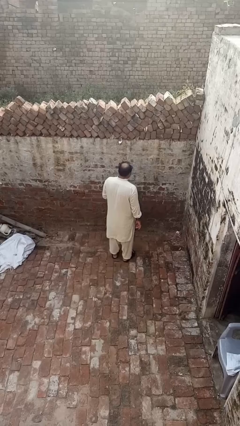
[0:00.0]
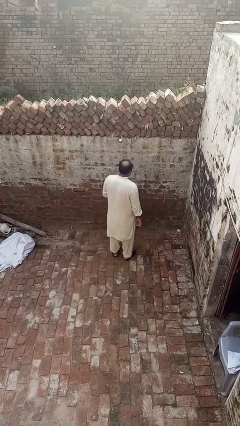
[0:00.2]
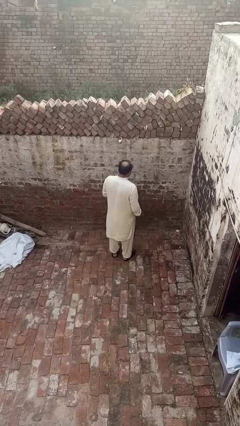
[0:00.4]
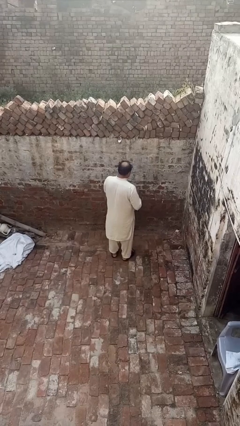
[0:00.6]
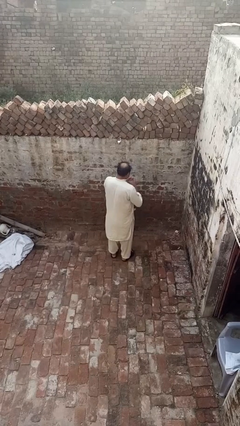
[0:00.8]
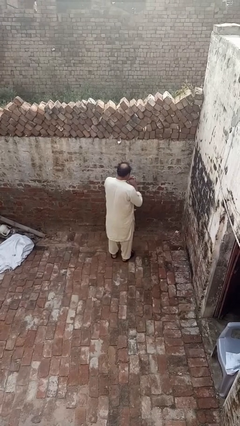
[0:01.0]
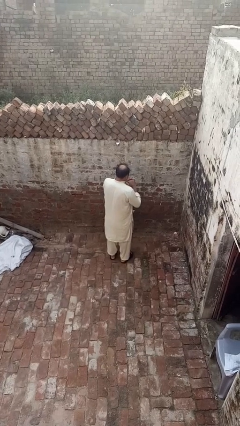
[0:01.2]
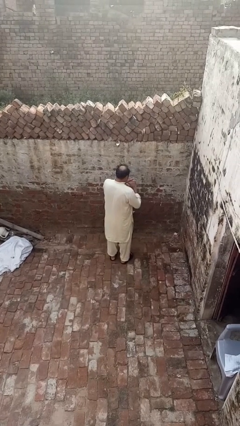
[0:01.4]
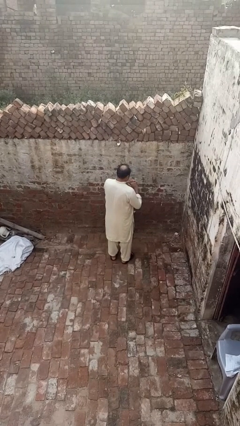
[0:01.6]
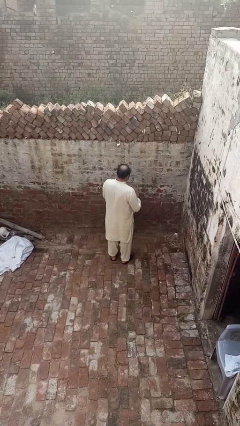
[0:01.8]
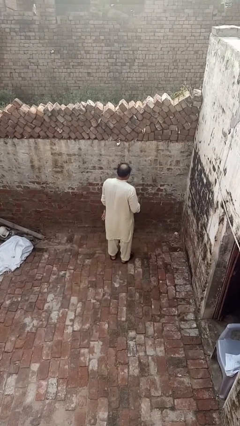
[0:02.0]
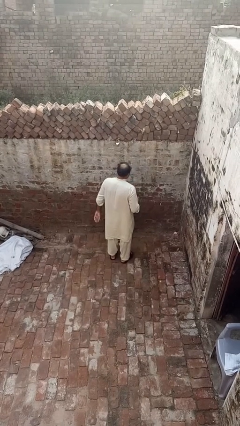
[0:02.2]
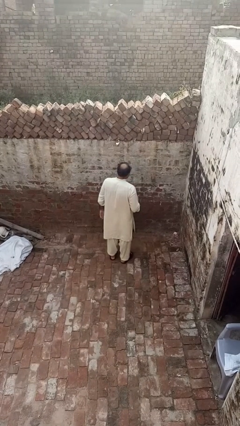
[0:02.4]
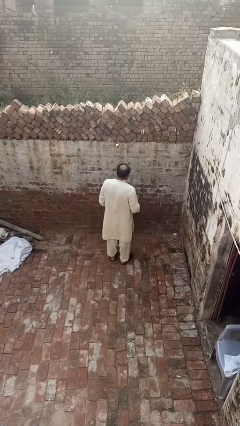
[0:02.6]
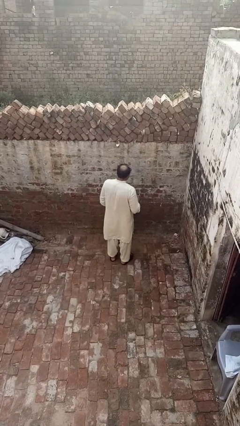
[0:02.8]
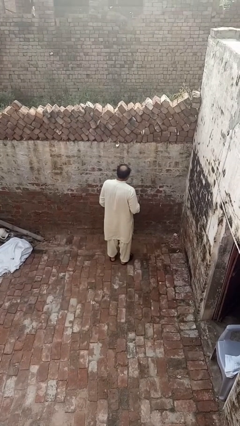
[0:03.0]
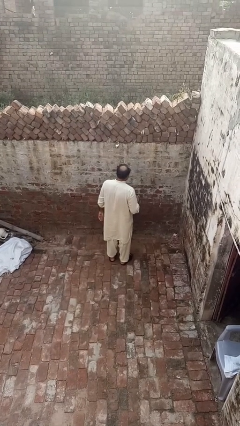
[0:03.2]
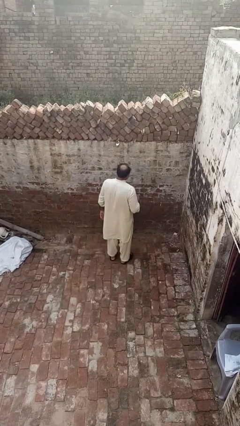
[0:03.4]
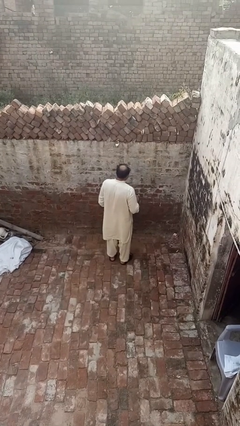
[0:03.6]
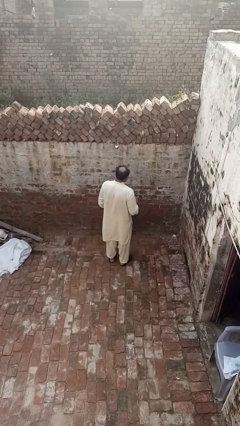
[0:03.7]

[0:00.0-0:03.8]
person puts on ring

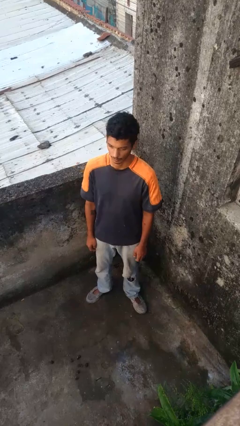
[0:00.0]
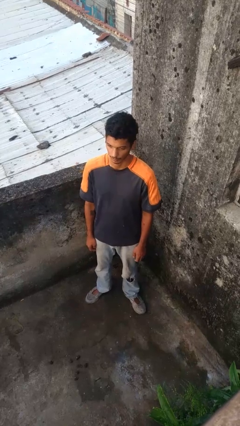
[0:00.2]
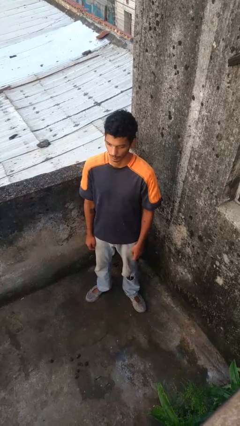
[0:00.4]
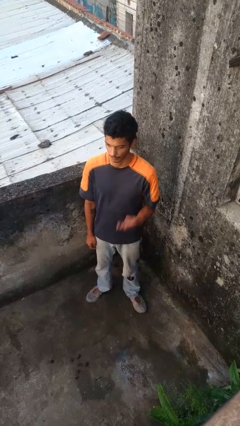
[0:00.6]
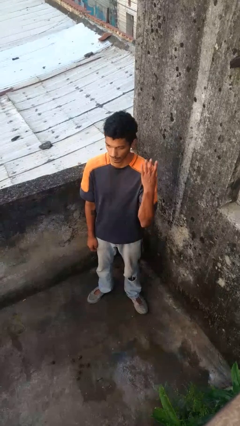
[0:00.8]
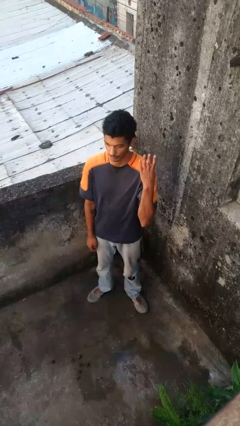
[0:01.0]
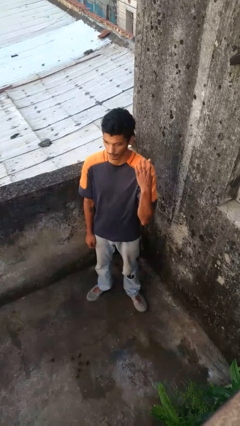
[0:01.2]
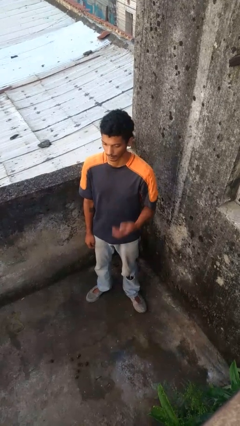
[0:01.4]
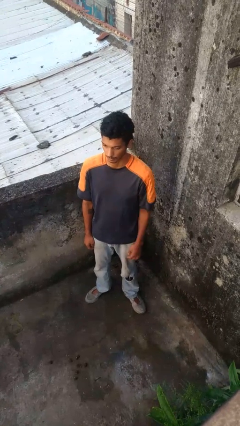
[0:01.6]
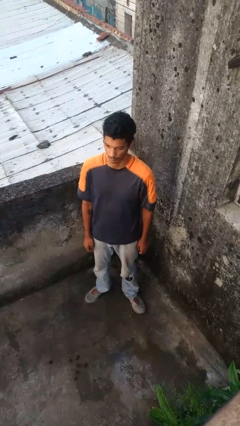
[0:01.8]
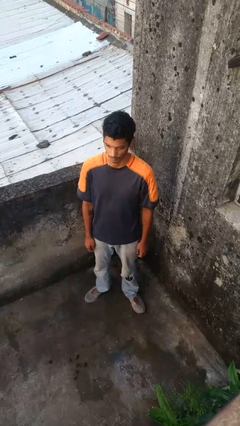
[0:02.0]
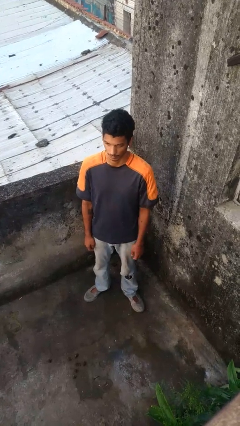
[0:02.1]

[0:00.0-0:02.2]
person gestures number four

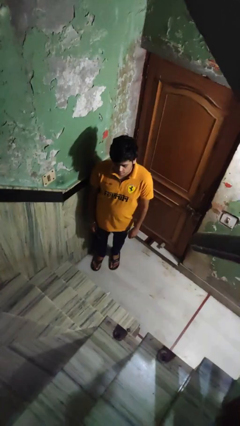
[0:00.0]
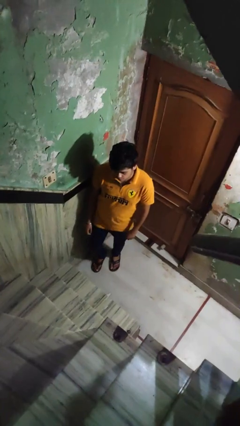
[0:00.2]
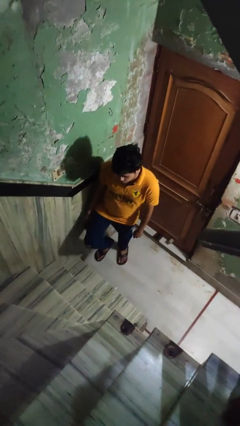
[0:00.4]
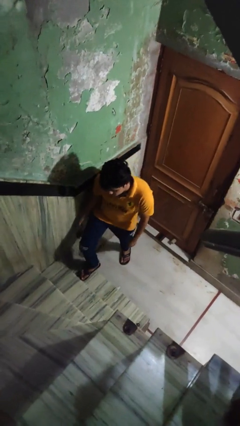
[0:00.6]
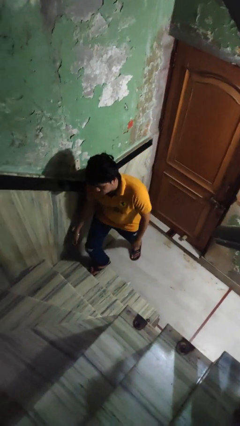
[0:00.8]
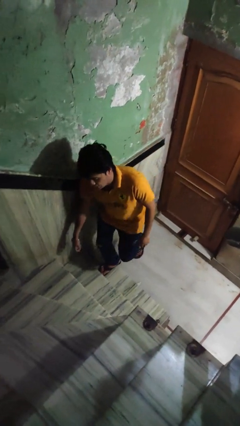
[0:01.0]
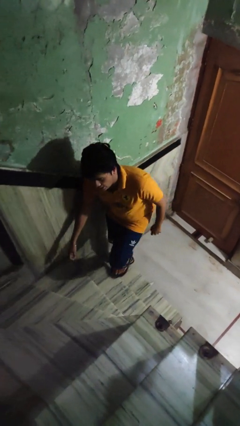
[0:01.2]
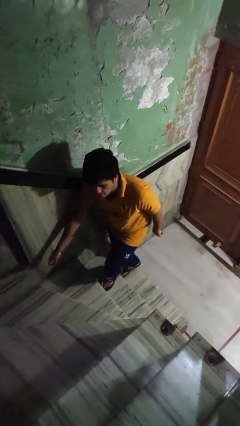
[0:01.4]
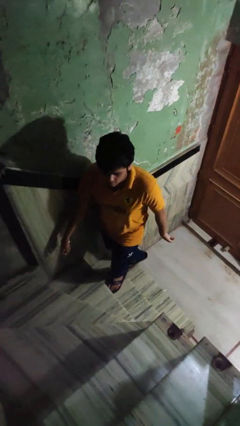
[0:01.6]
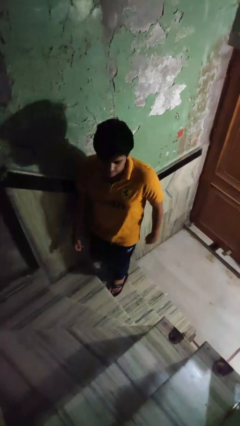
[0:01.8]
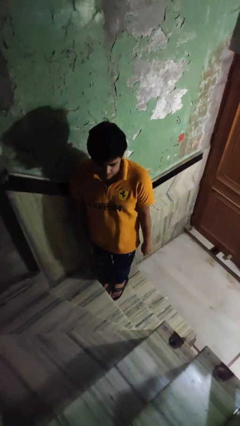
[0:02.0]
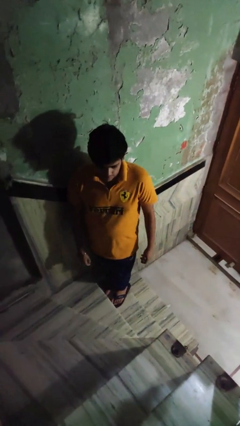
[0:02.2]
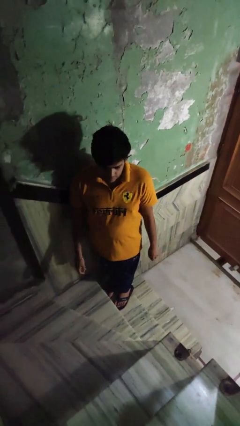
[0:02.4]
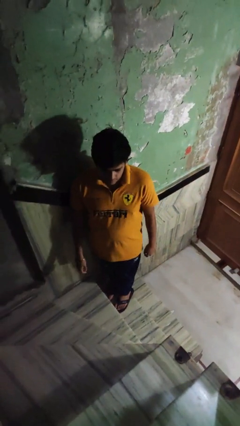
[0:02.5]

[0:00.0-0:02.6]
person climbs up stairs

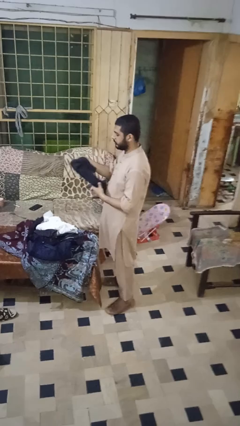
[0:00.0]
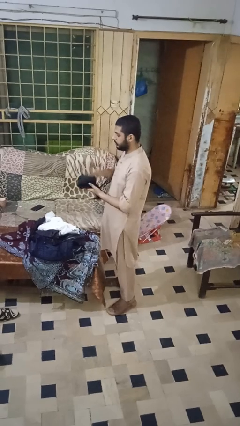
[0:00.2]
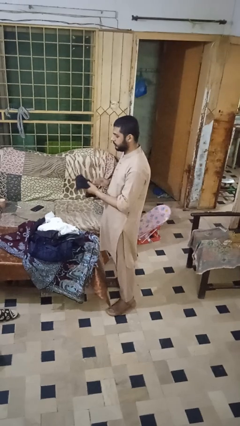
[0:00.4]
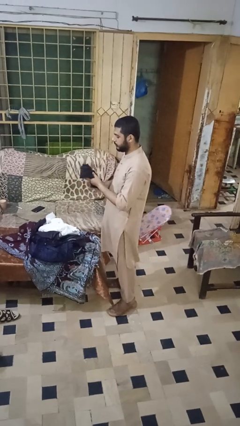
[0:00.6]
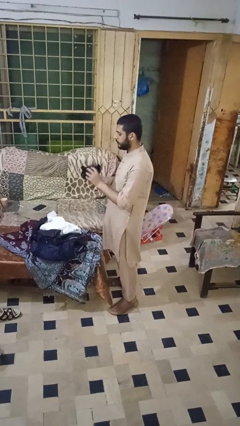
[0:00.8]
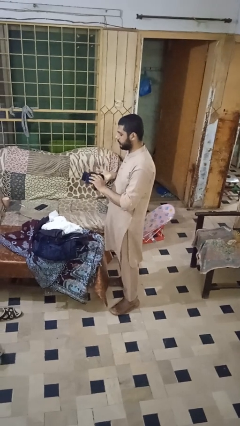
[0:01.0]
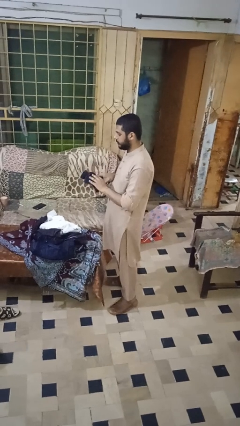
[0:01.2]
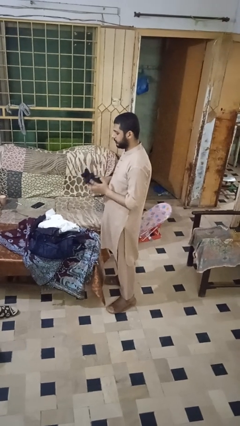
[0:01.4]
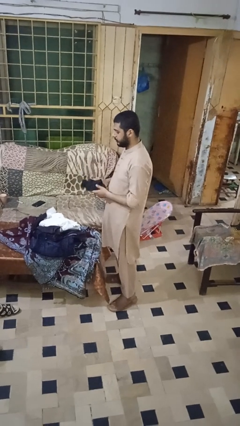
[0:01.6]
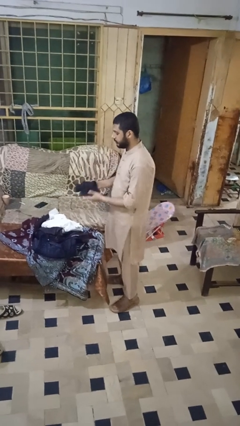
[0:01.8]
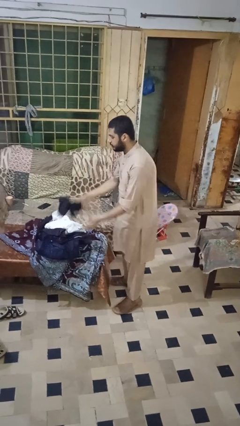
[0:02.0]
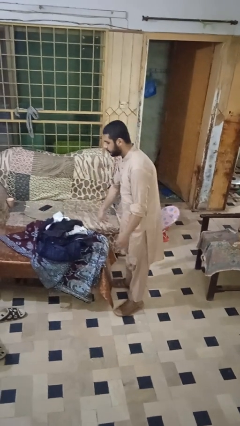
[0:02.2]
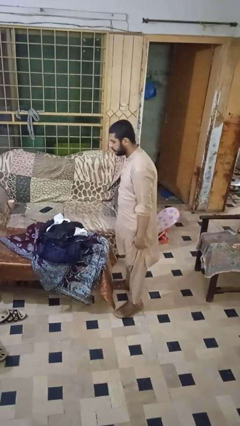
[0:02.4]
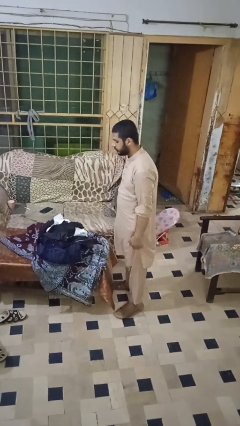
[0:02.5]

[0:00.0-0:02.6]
person folds shirt

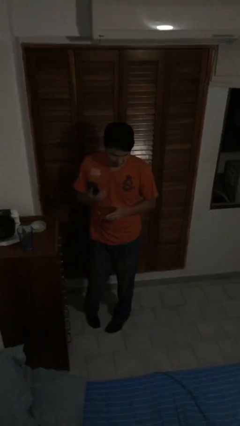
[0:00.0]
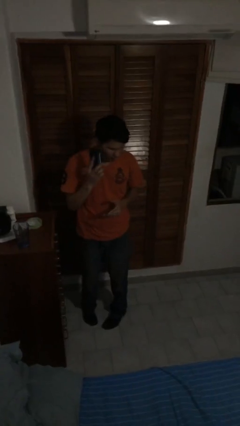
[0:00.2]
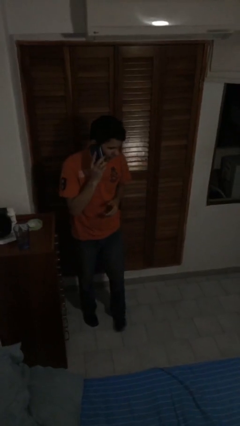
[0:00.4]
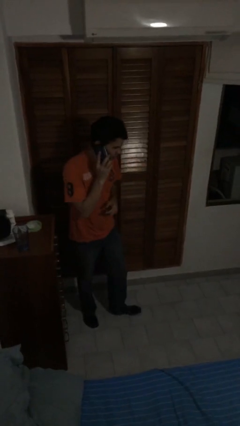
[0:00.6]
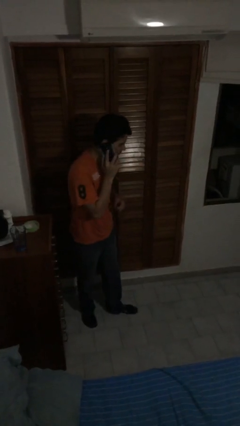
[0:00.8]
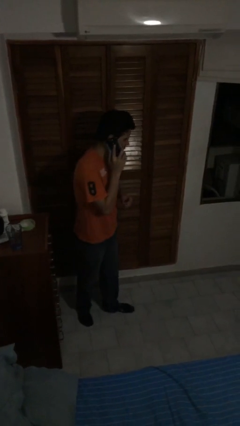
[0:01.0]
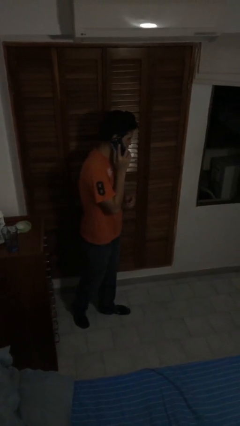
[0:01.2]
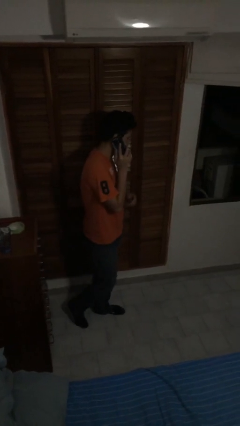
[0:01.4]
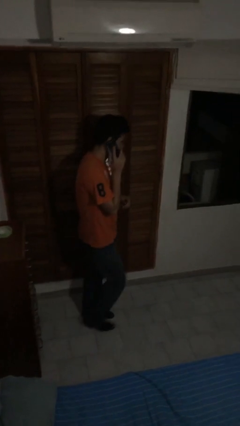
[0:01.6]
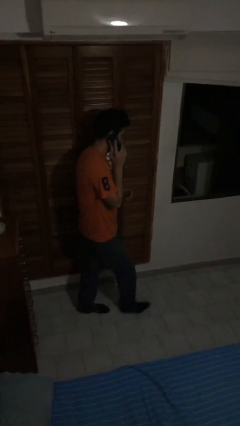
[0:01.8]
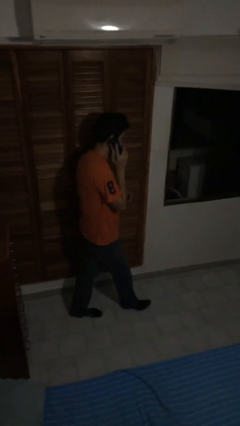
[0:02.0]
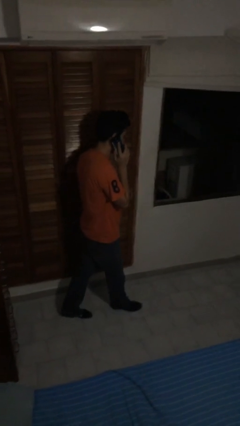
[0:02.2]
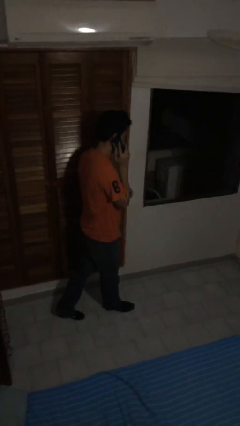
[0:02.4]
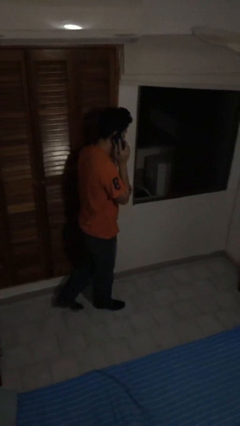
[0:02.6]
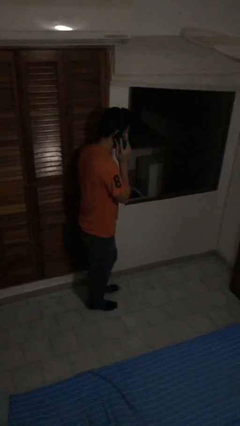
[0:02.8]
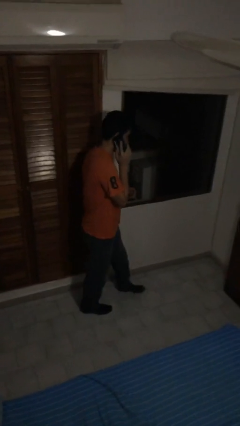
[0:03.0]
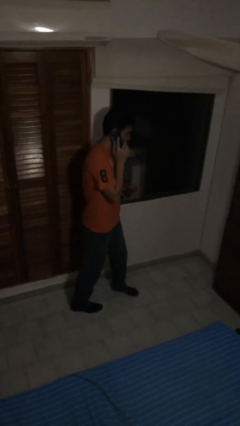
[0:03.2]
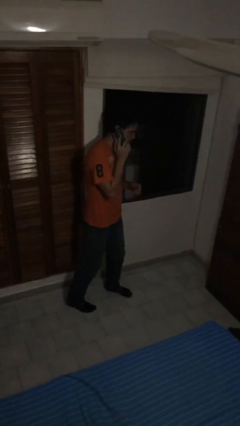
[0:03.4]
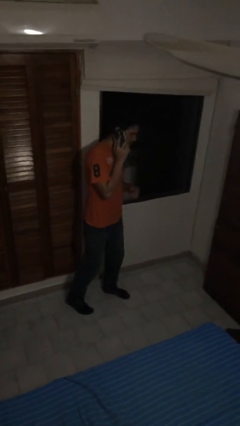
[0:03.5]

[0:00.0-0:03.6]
person talks on phone

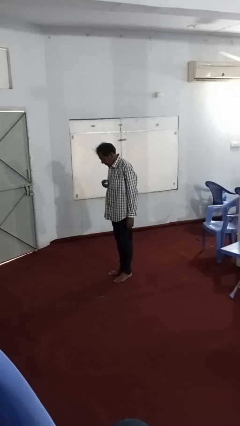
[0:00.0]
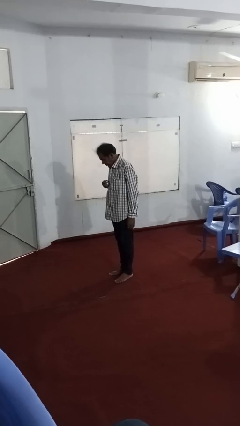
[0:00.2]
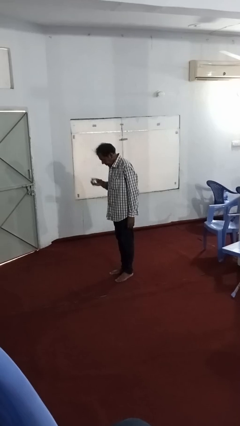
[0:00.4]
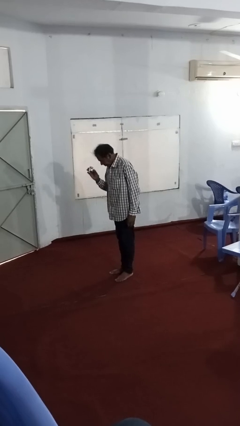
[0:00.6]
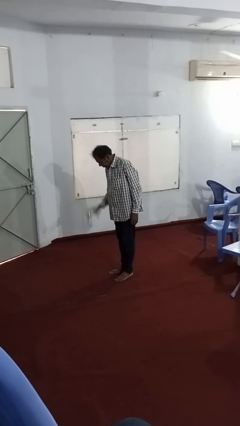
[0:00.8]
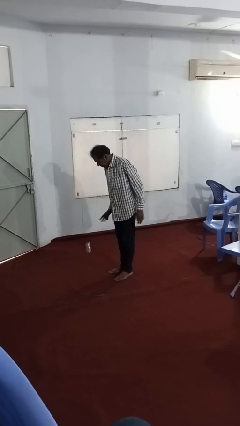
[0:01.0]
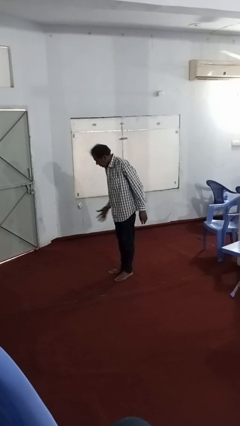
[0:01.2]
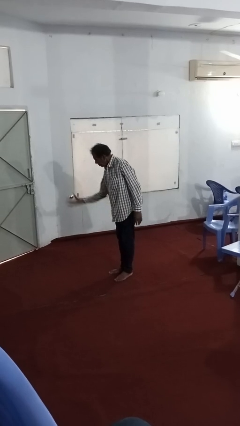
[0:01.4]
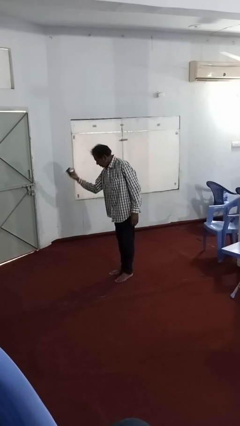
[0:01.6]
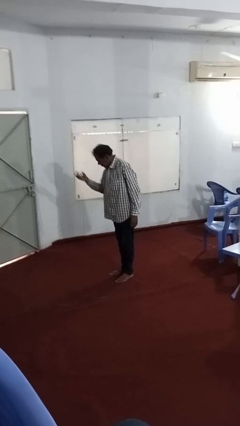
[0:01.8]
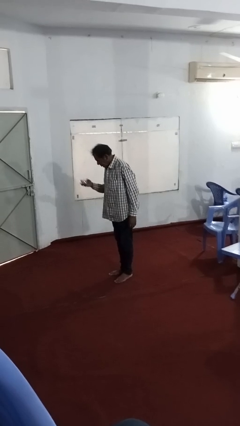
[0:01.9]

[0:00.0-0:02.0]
person bounces ball on floor

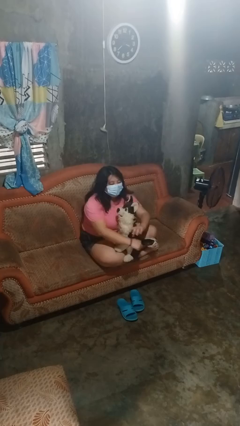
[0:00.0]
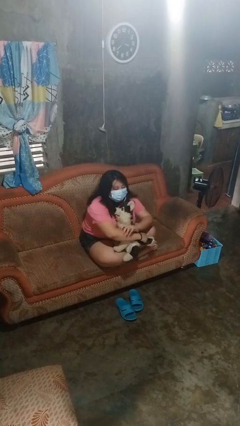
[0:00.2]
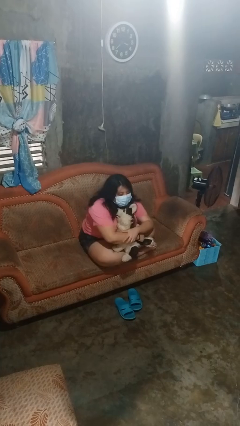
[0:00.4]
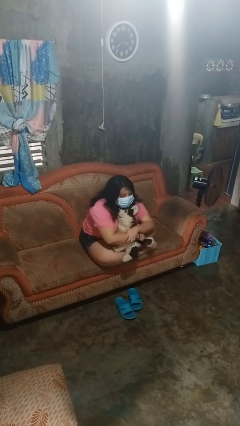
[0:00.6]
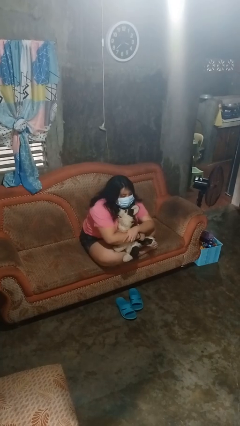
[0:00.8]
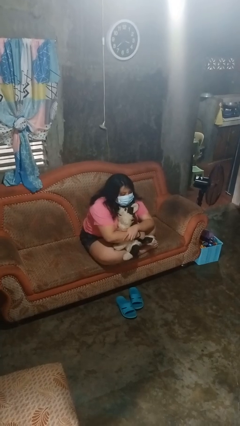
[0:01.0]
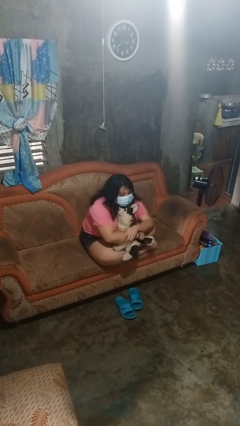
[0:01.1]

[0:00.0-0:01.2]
person hugs stuffed animal
